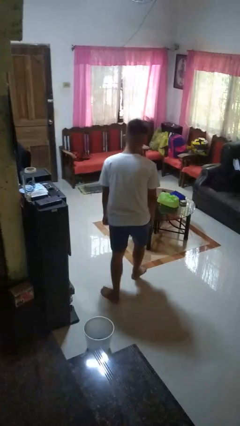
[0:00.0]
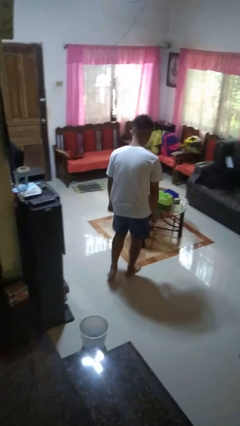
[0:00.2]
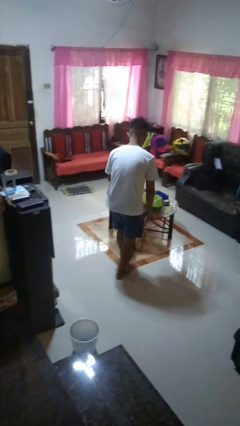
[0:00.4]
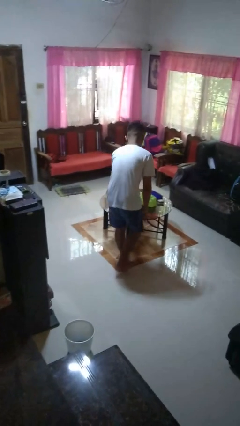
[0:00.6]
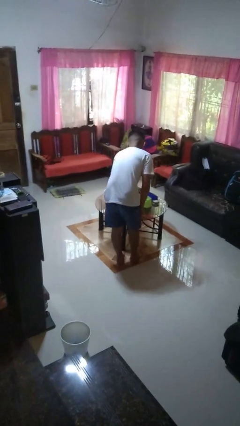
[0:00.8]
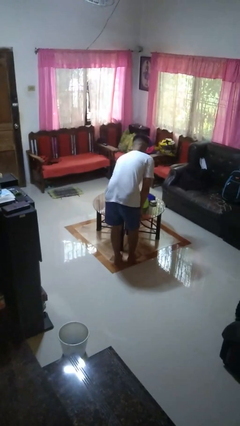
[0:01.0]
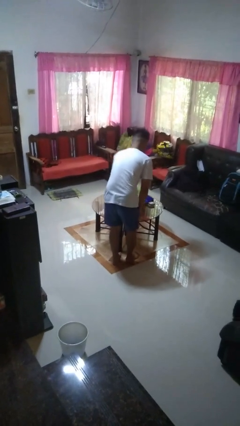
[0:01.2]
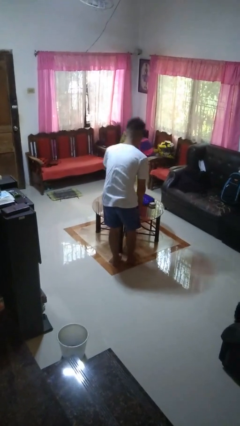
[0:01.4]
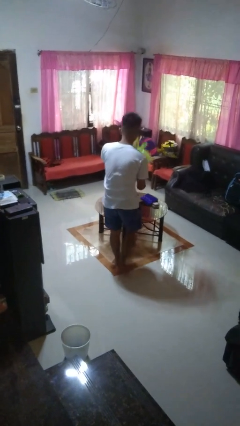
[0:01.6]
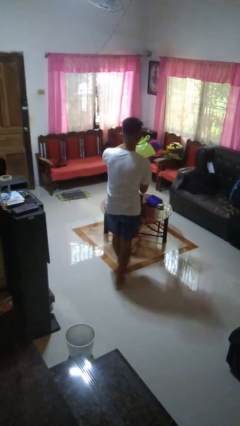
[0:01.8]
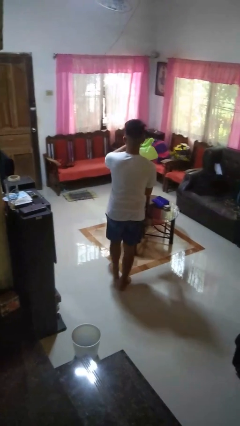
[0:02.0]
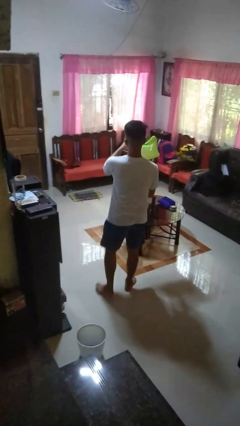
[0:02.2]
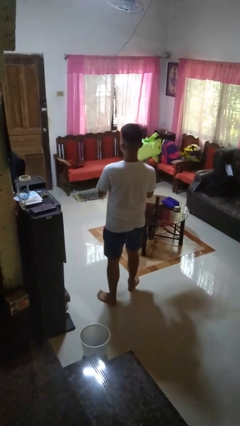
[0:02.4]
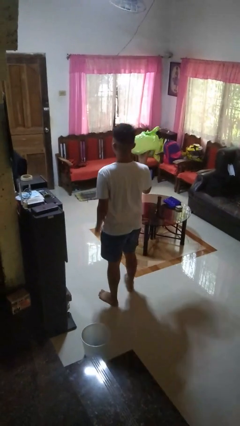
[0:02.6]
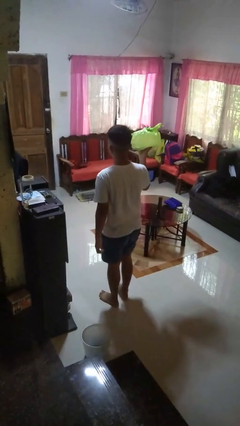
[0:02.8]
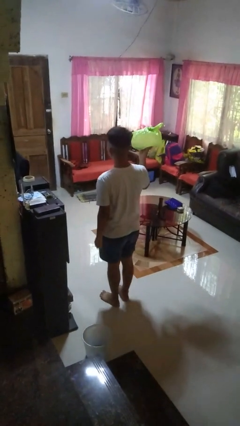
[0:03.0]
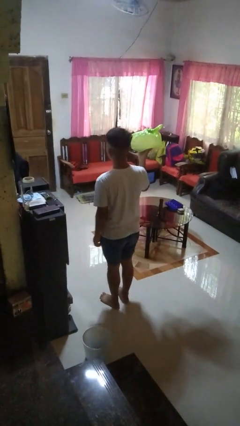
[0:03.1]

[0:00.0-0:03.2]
person picks up object from table

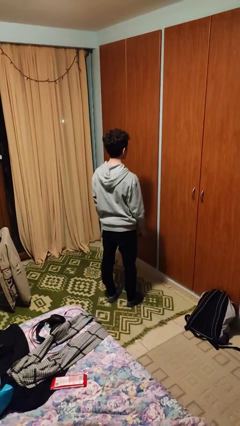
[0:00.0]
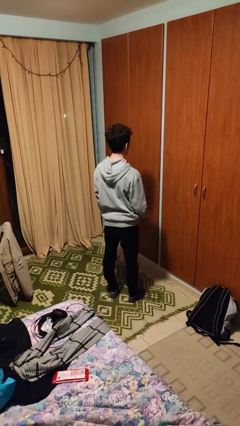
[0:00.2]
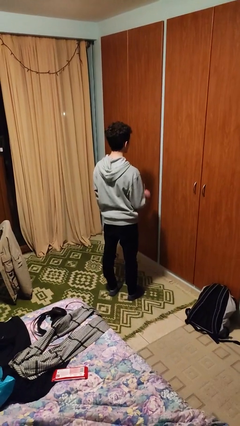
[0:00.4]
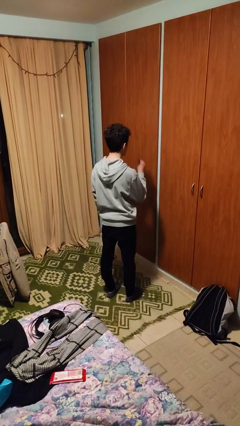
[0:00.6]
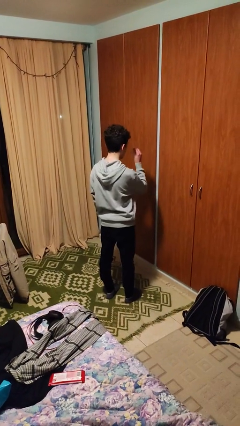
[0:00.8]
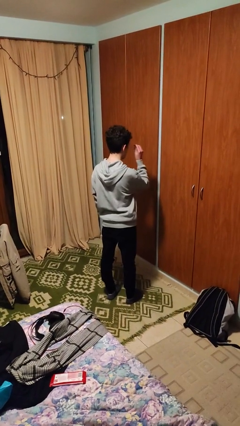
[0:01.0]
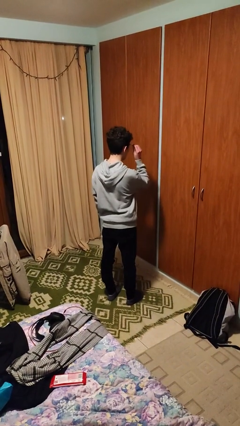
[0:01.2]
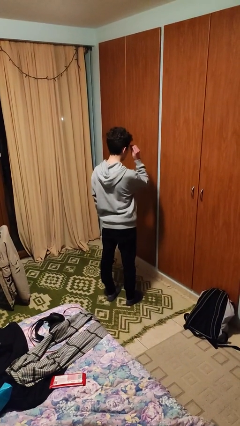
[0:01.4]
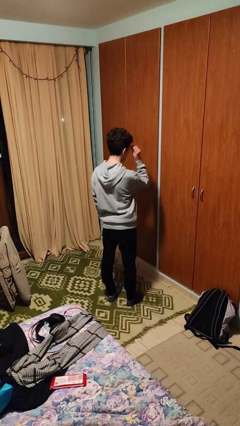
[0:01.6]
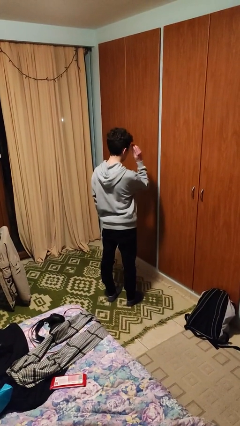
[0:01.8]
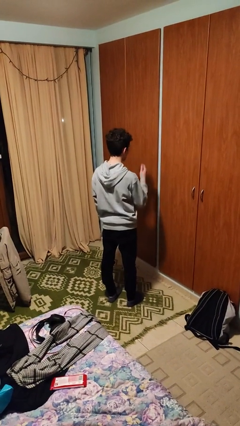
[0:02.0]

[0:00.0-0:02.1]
person puts on glasses

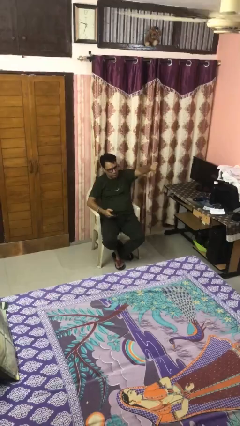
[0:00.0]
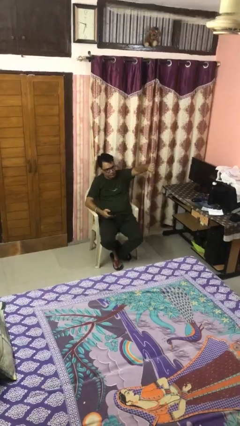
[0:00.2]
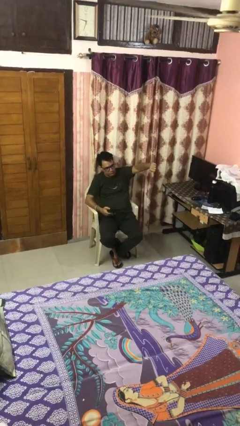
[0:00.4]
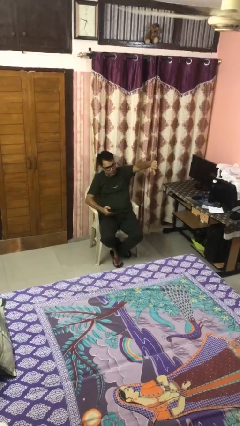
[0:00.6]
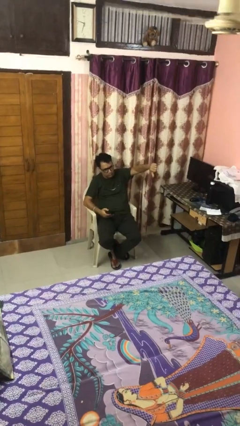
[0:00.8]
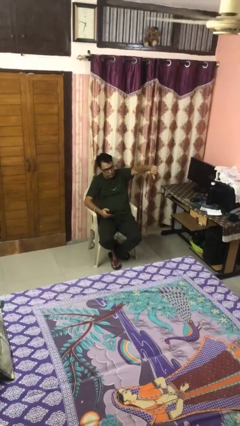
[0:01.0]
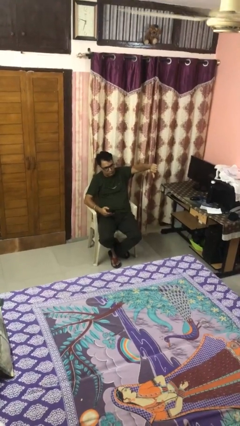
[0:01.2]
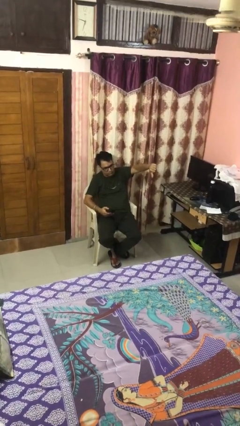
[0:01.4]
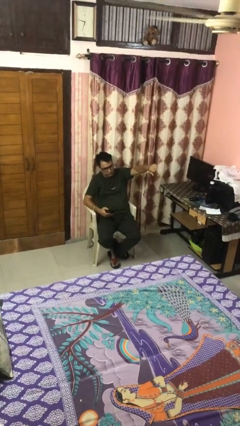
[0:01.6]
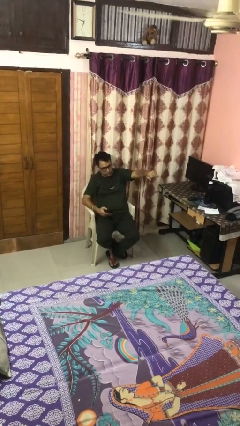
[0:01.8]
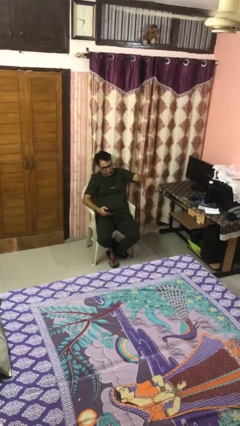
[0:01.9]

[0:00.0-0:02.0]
person gestures thumbs down

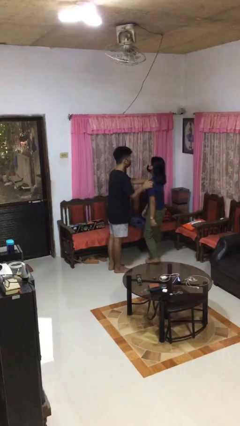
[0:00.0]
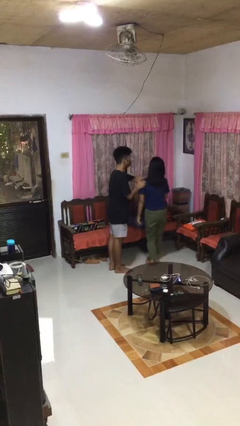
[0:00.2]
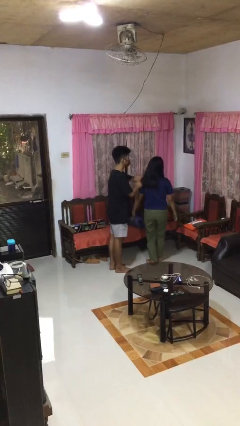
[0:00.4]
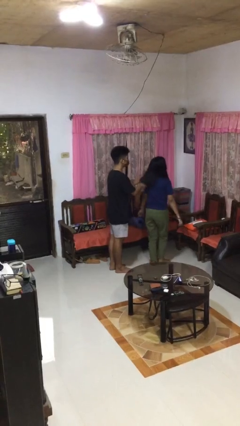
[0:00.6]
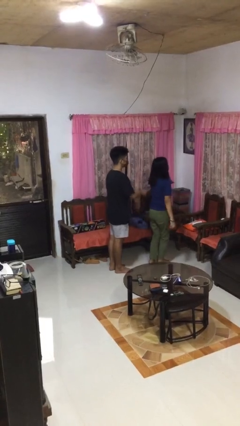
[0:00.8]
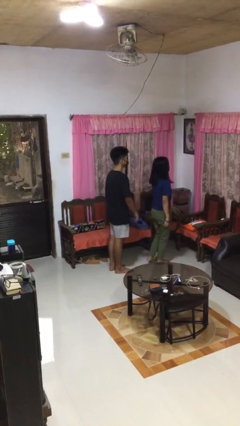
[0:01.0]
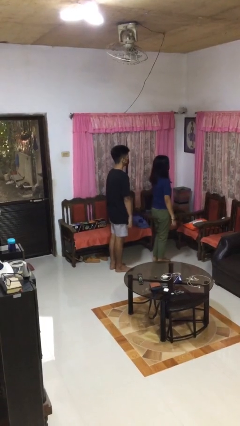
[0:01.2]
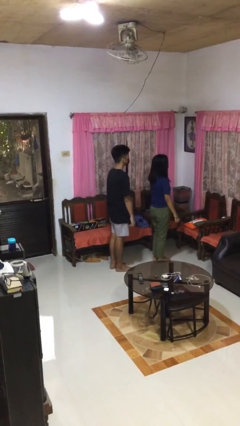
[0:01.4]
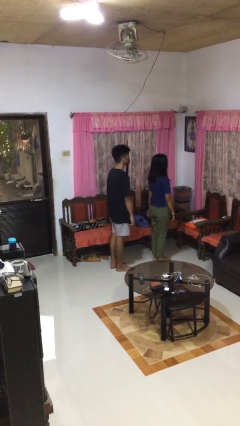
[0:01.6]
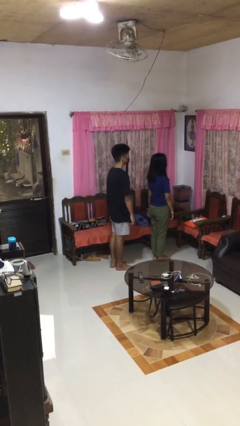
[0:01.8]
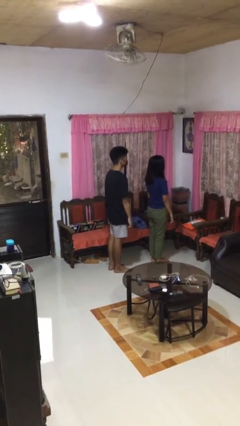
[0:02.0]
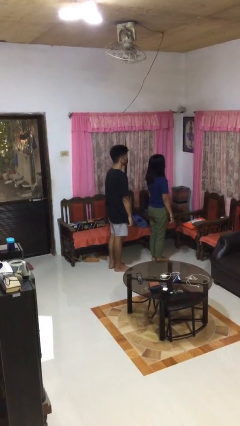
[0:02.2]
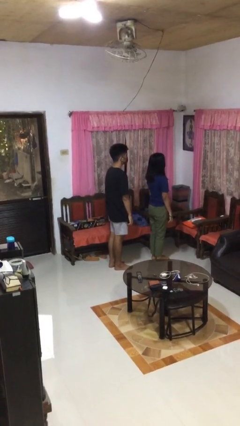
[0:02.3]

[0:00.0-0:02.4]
person spins person around

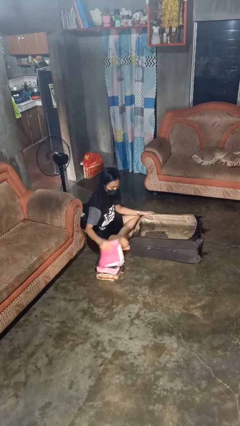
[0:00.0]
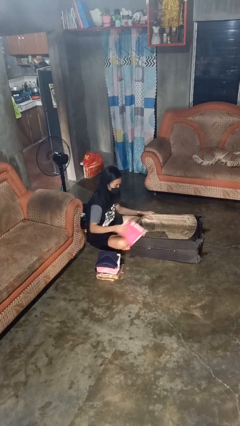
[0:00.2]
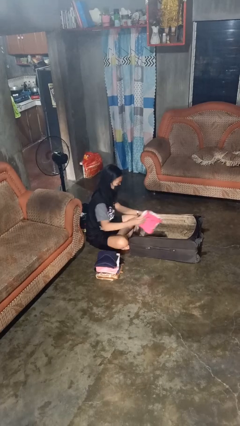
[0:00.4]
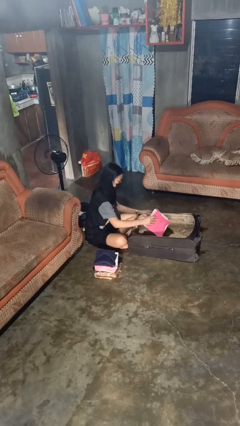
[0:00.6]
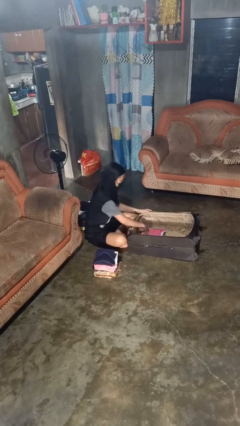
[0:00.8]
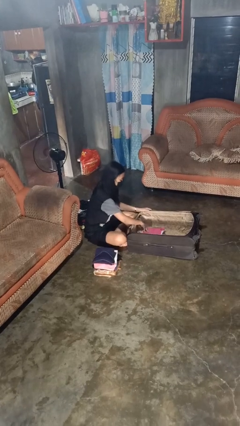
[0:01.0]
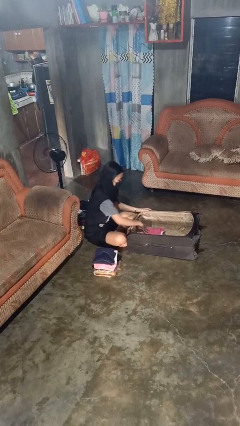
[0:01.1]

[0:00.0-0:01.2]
person loads clothes into suitcase

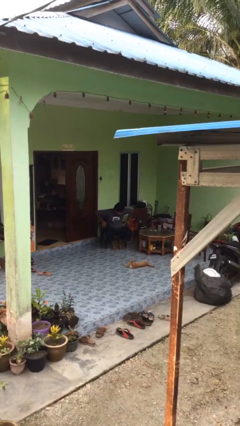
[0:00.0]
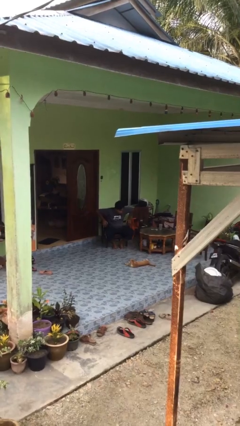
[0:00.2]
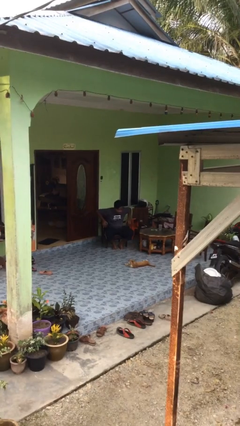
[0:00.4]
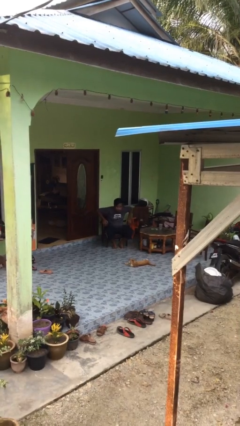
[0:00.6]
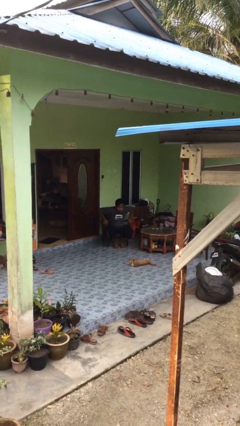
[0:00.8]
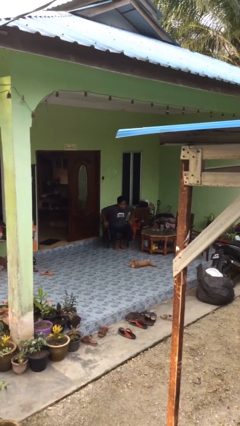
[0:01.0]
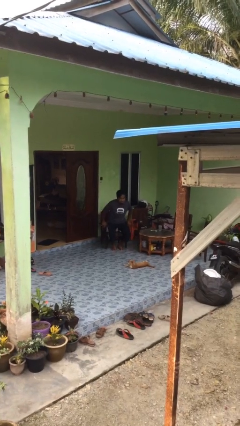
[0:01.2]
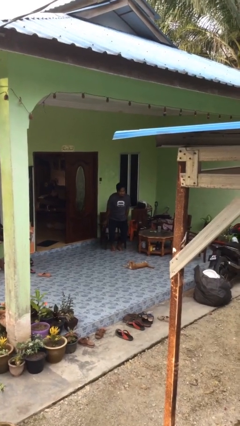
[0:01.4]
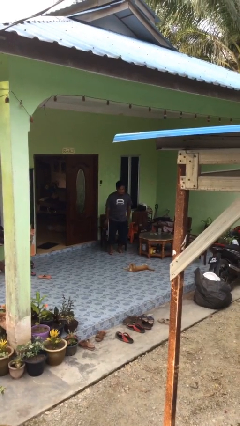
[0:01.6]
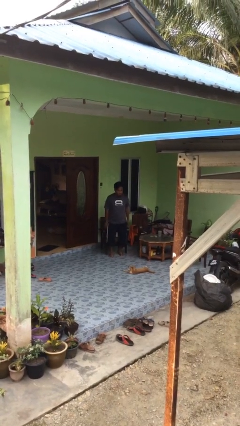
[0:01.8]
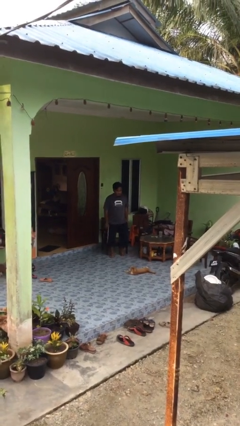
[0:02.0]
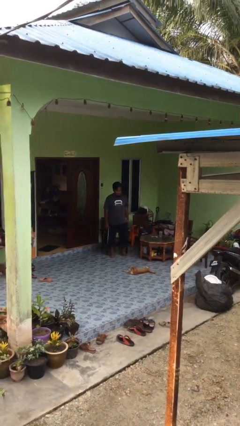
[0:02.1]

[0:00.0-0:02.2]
person stands up

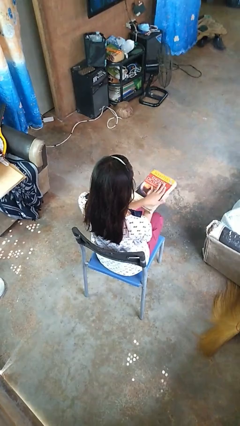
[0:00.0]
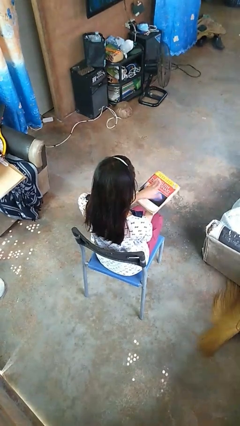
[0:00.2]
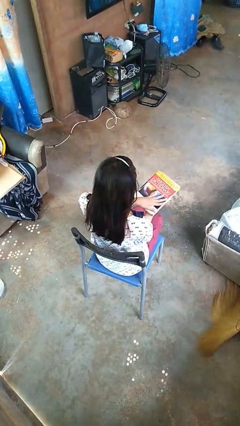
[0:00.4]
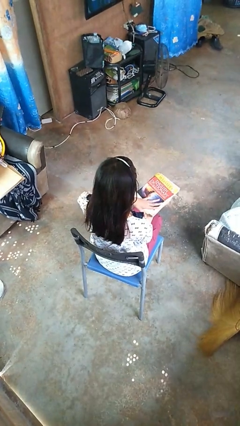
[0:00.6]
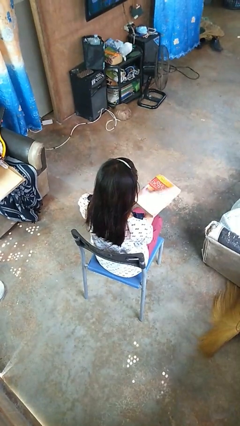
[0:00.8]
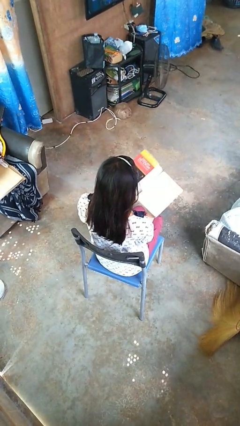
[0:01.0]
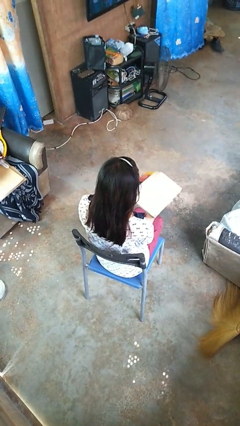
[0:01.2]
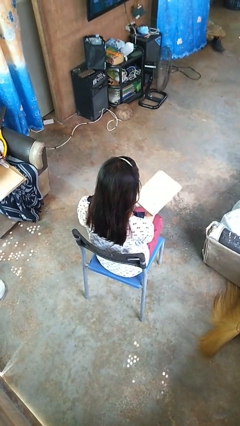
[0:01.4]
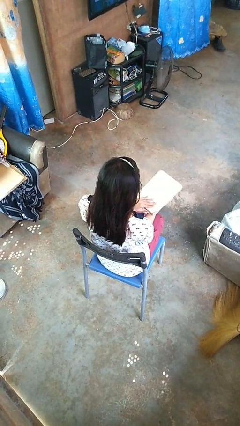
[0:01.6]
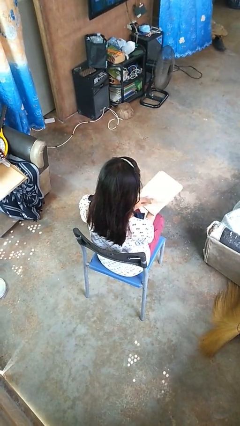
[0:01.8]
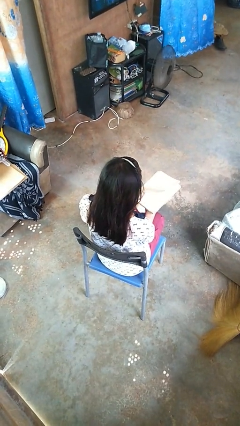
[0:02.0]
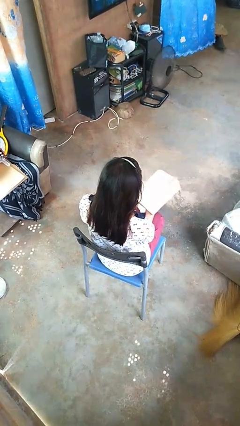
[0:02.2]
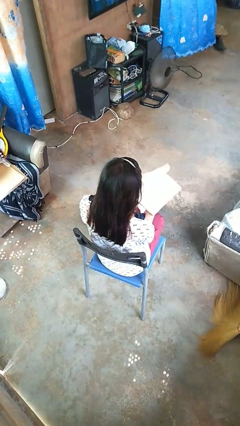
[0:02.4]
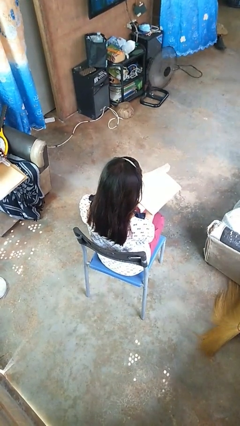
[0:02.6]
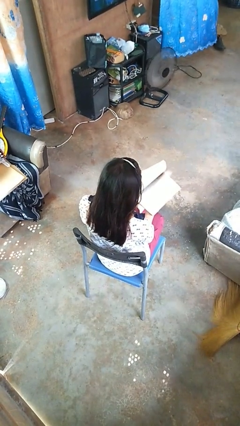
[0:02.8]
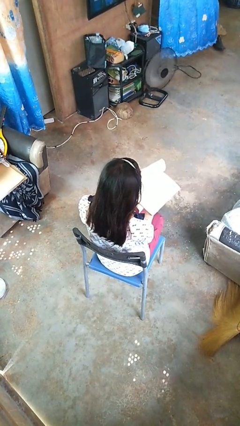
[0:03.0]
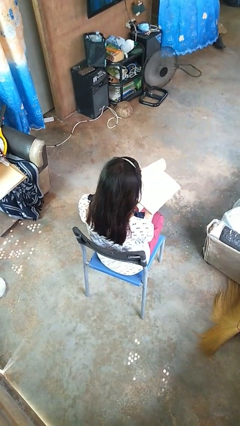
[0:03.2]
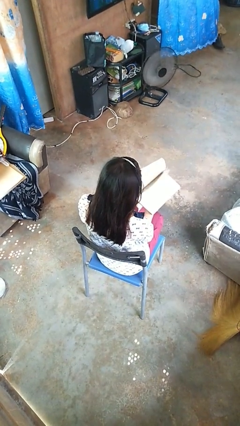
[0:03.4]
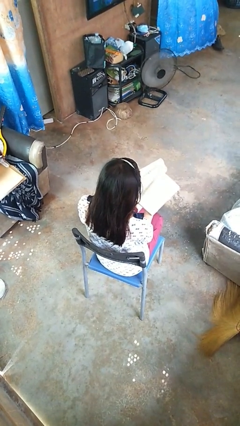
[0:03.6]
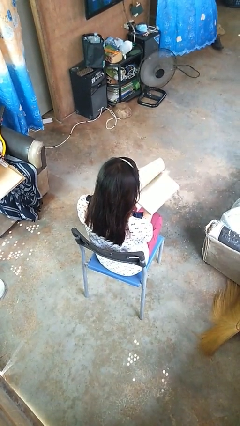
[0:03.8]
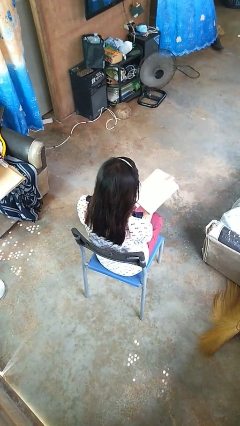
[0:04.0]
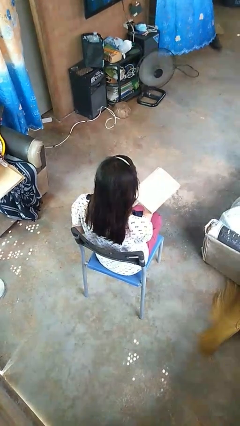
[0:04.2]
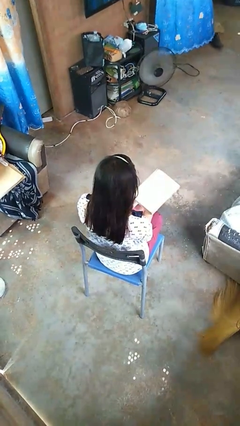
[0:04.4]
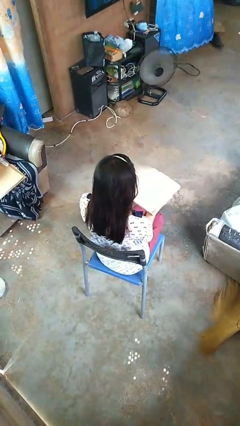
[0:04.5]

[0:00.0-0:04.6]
person reads book
